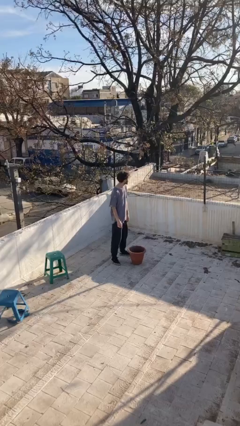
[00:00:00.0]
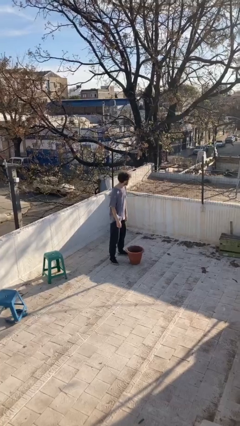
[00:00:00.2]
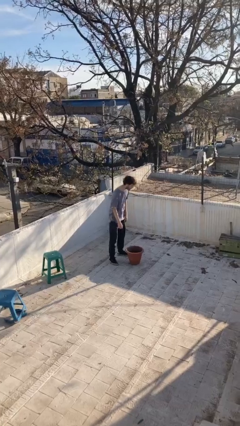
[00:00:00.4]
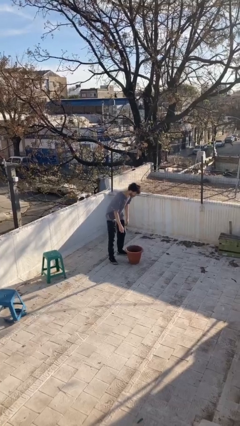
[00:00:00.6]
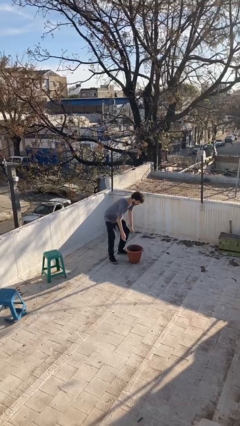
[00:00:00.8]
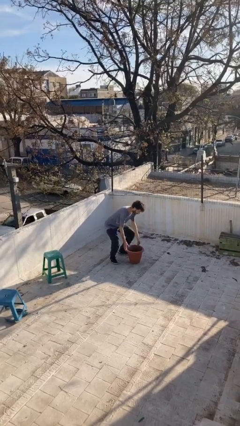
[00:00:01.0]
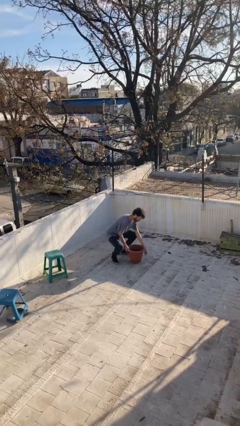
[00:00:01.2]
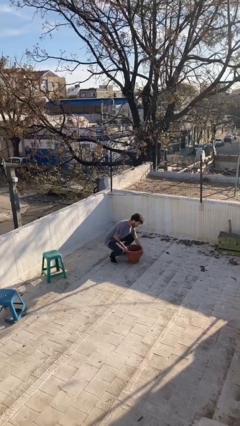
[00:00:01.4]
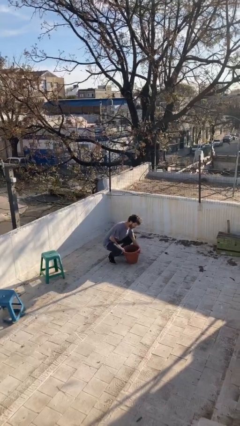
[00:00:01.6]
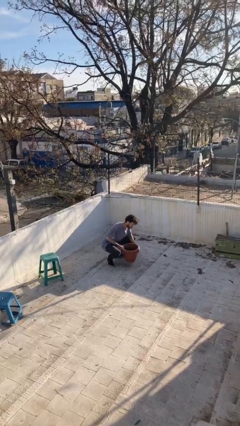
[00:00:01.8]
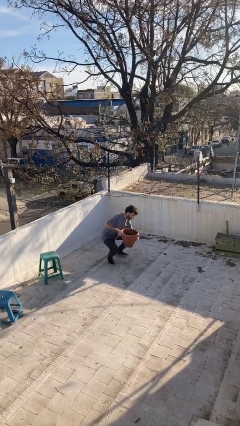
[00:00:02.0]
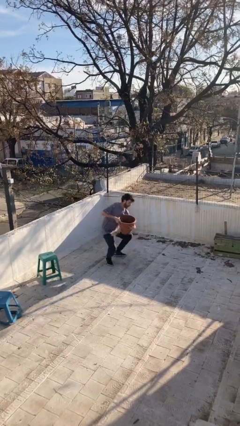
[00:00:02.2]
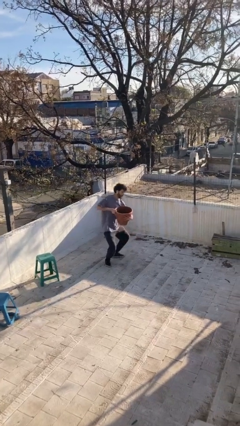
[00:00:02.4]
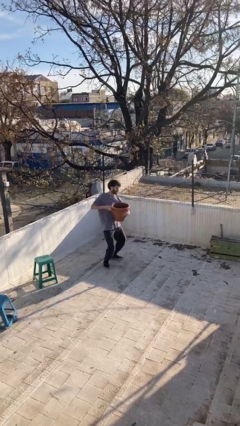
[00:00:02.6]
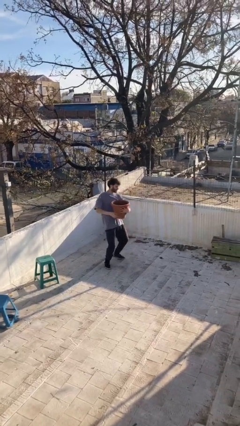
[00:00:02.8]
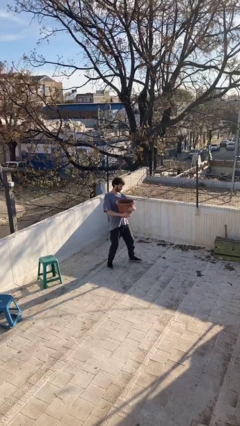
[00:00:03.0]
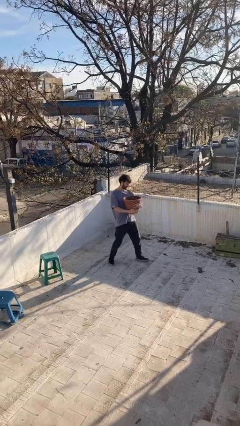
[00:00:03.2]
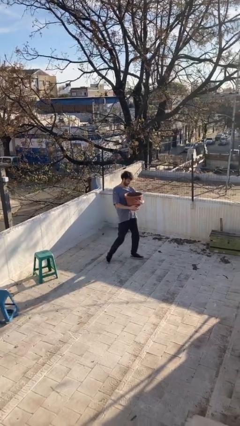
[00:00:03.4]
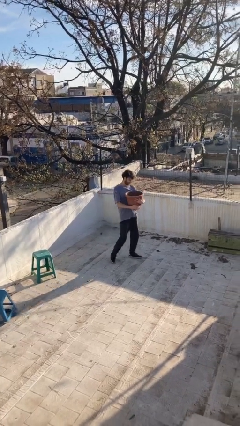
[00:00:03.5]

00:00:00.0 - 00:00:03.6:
person picks up object from floor

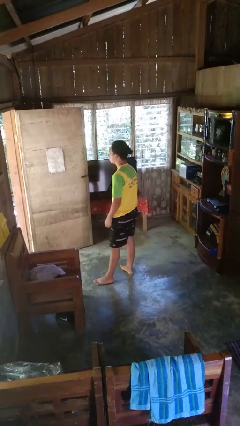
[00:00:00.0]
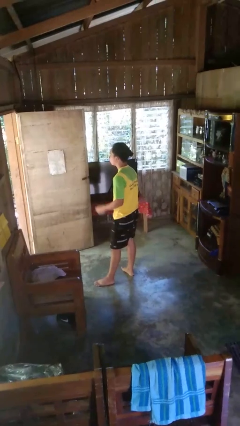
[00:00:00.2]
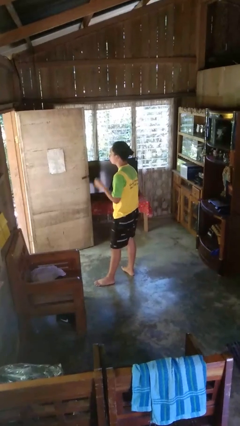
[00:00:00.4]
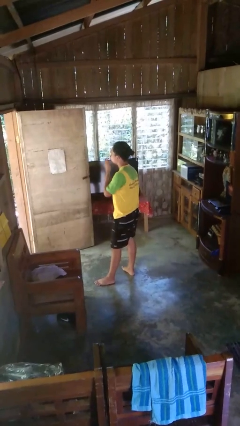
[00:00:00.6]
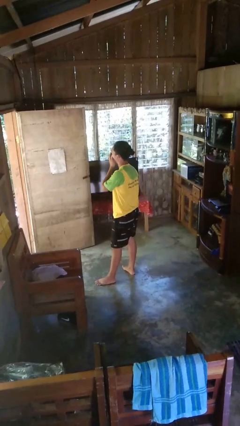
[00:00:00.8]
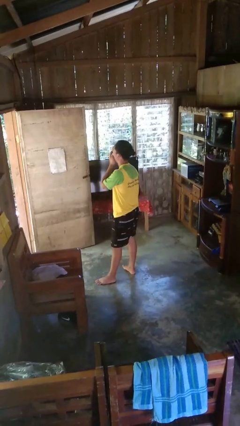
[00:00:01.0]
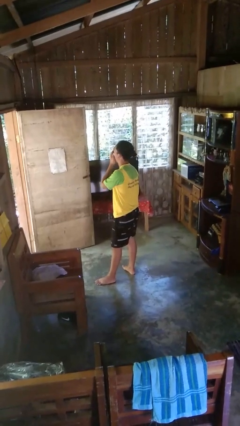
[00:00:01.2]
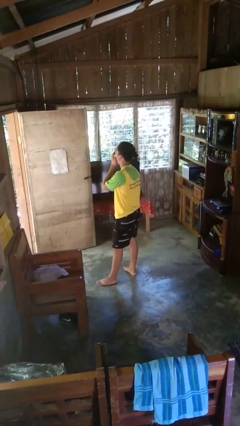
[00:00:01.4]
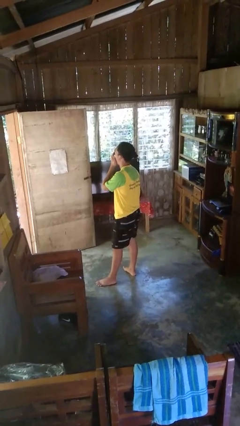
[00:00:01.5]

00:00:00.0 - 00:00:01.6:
person yawns

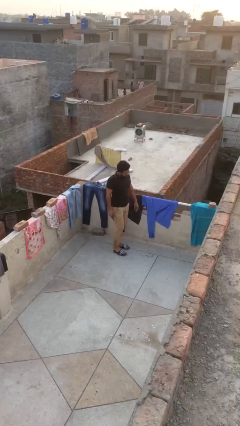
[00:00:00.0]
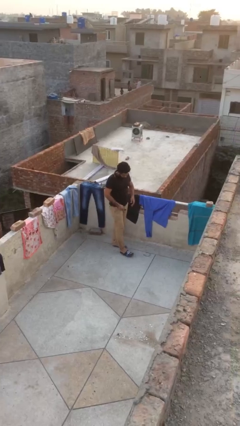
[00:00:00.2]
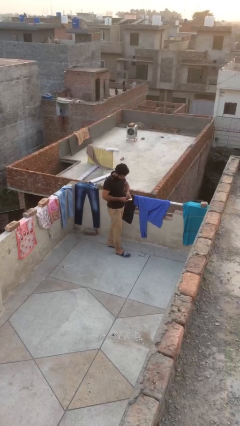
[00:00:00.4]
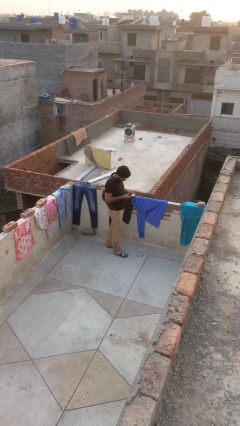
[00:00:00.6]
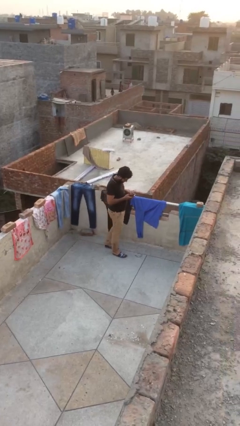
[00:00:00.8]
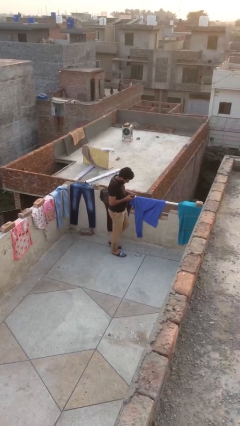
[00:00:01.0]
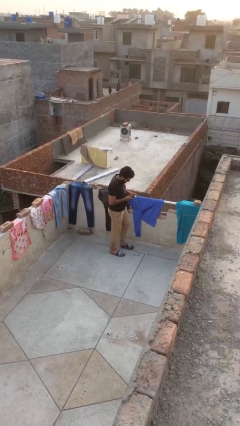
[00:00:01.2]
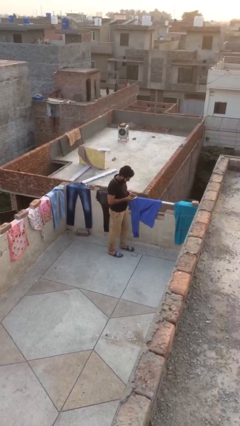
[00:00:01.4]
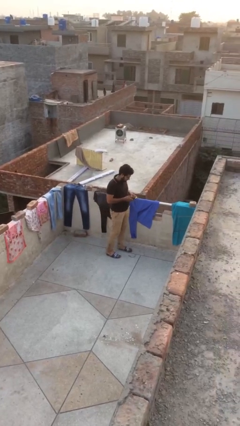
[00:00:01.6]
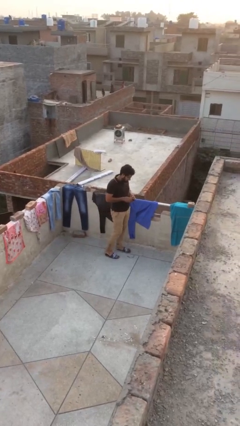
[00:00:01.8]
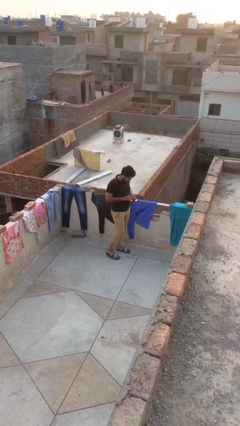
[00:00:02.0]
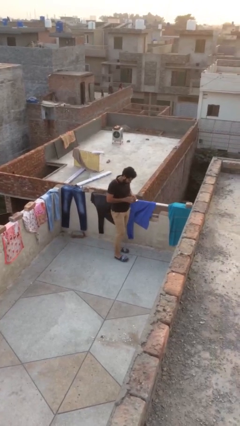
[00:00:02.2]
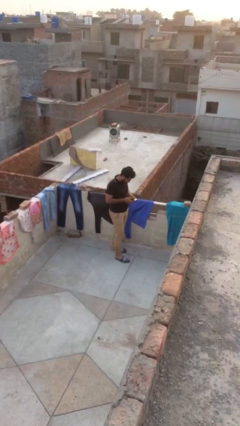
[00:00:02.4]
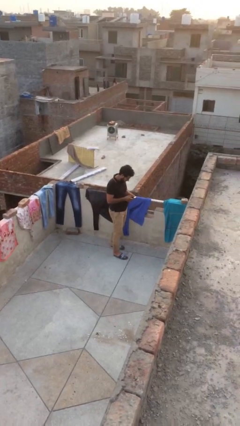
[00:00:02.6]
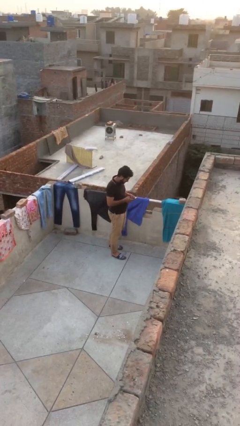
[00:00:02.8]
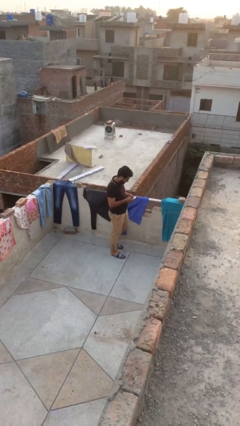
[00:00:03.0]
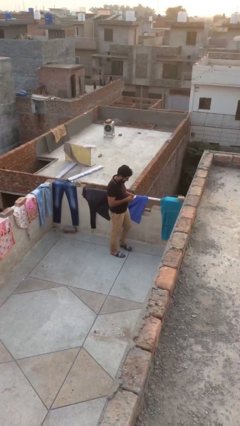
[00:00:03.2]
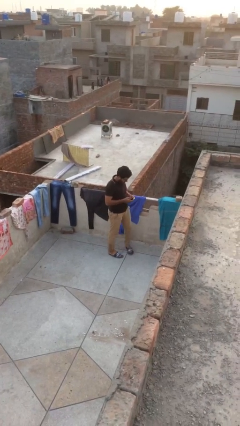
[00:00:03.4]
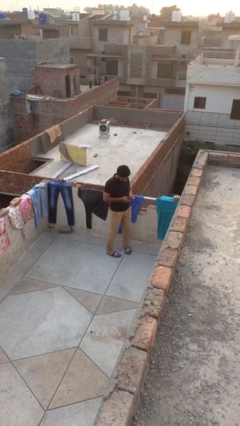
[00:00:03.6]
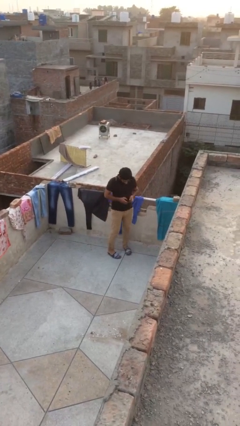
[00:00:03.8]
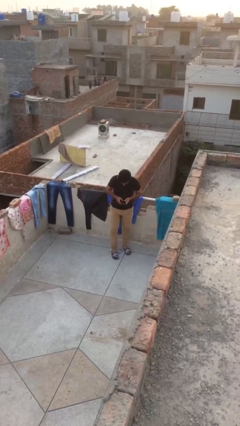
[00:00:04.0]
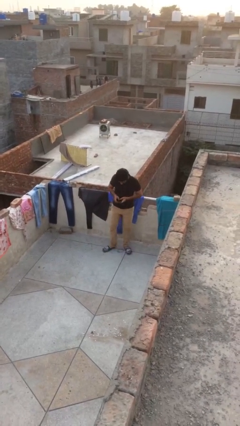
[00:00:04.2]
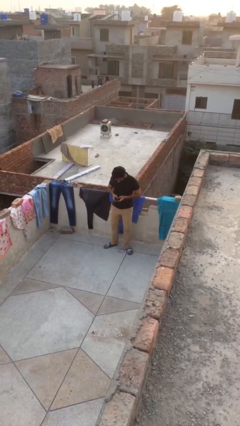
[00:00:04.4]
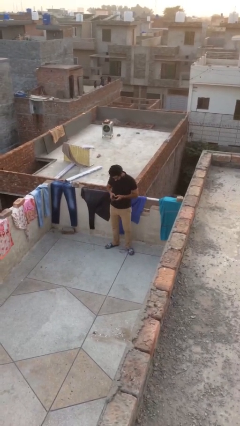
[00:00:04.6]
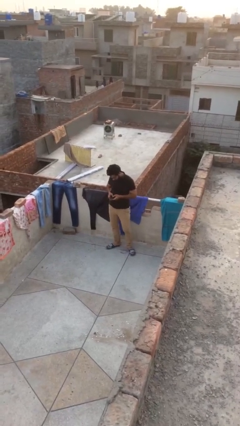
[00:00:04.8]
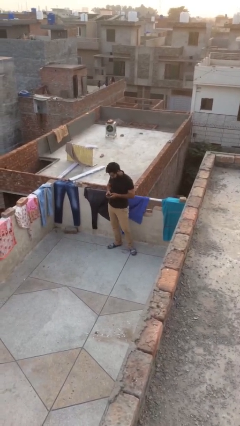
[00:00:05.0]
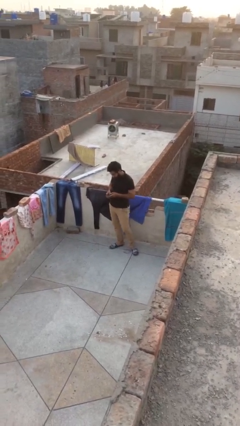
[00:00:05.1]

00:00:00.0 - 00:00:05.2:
person texts on phone

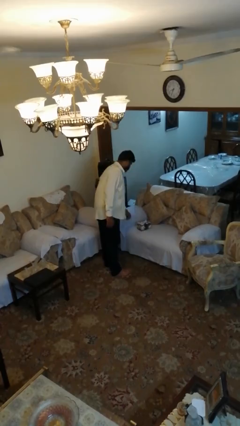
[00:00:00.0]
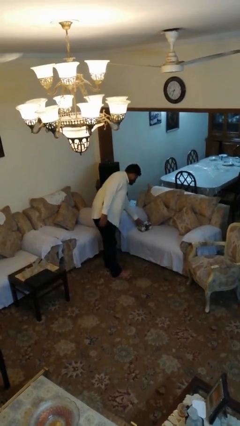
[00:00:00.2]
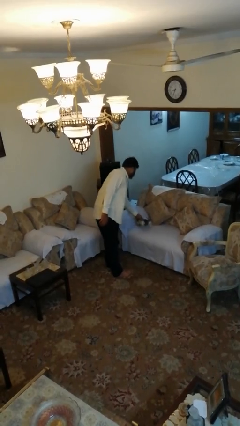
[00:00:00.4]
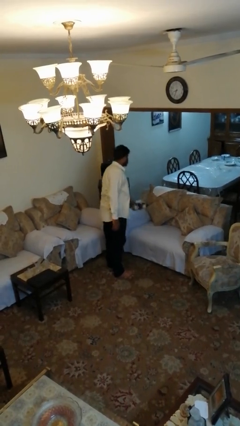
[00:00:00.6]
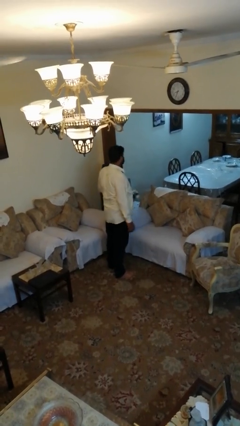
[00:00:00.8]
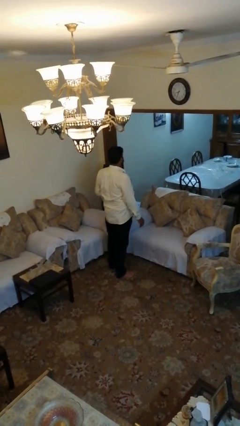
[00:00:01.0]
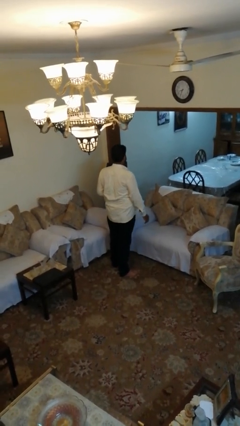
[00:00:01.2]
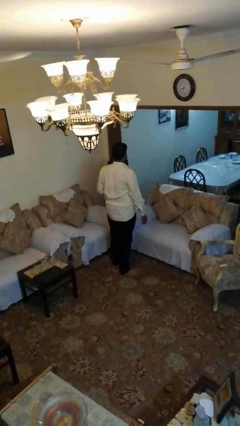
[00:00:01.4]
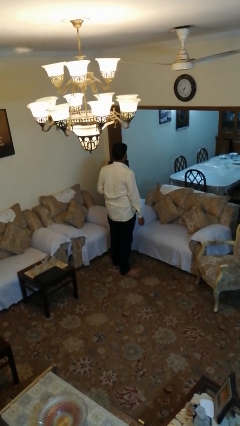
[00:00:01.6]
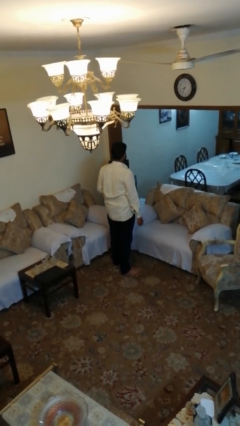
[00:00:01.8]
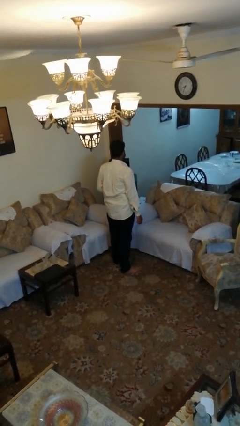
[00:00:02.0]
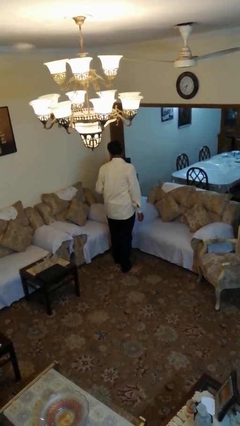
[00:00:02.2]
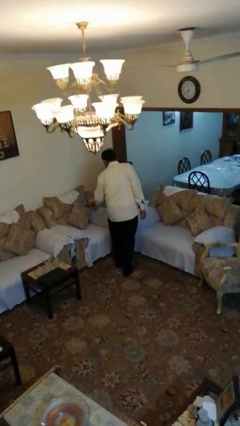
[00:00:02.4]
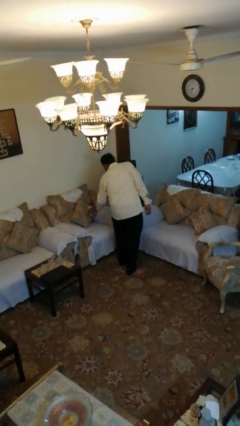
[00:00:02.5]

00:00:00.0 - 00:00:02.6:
person picks up object from couch

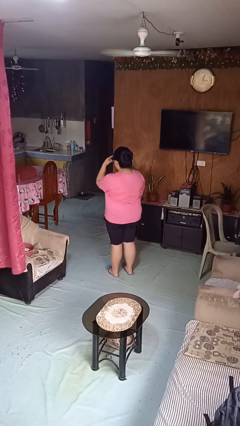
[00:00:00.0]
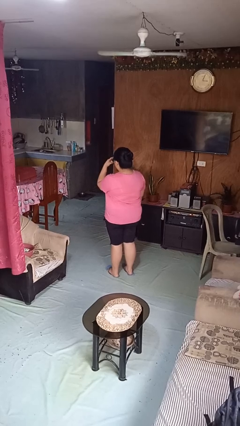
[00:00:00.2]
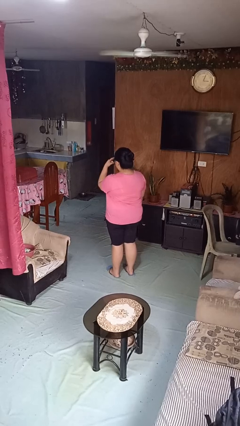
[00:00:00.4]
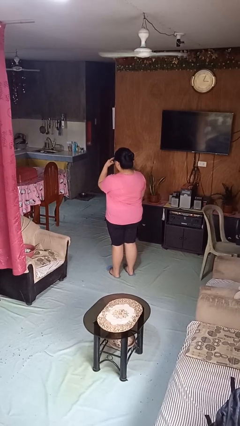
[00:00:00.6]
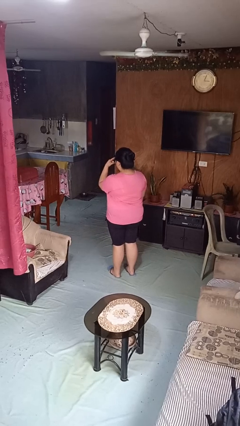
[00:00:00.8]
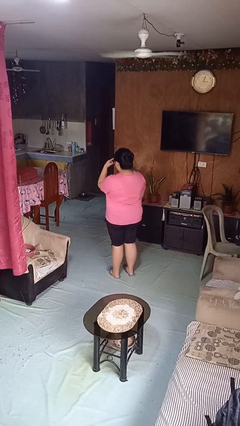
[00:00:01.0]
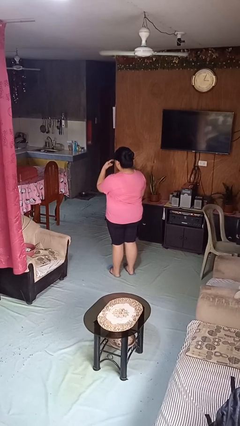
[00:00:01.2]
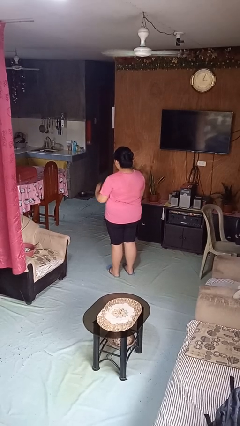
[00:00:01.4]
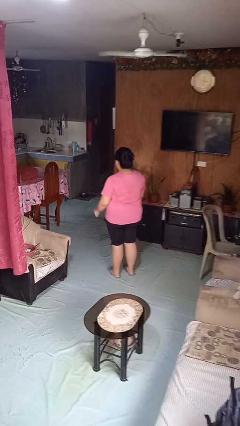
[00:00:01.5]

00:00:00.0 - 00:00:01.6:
person gestures watch closely

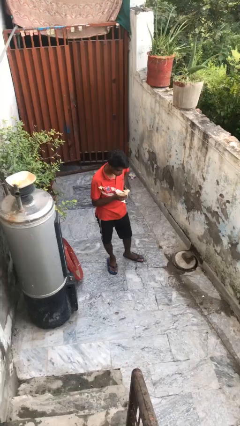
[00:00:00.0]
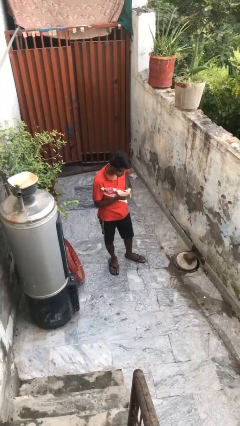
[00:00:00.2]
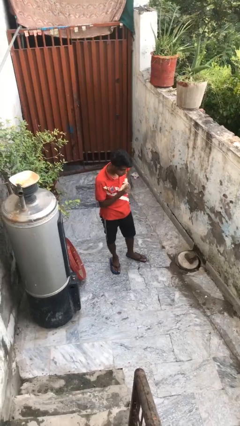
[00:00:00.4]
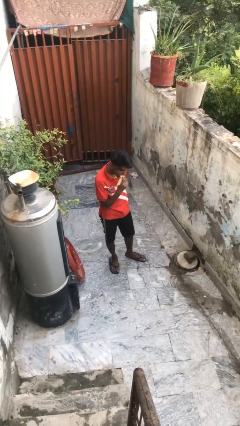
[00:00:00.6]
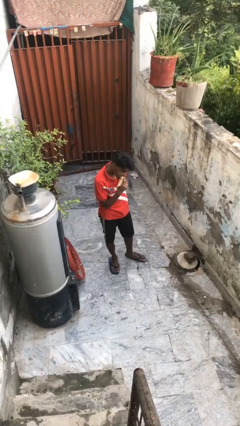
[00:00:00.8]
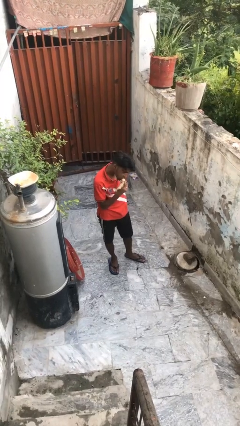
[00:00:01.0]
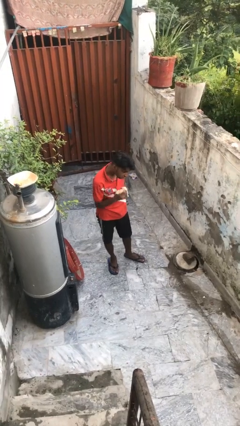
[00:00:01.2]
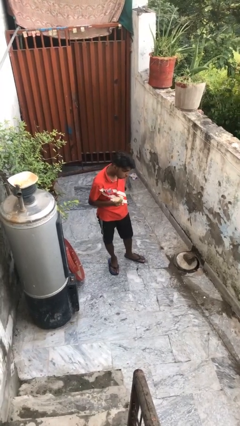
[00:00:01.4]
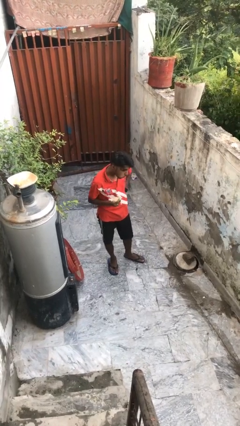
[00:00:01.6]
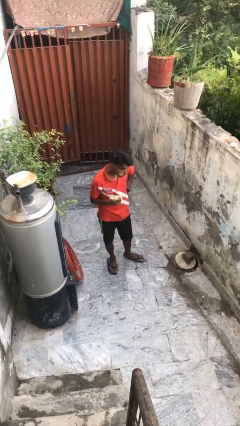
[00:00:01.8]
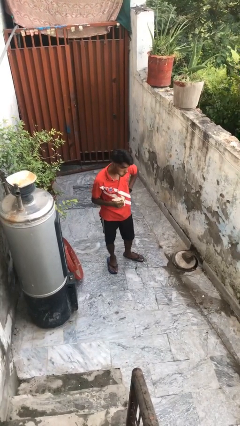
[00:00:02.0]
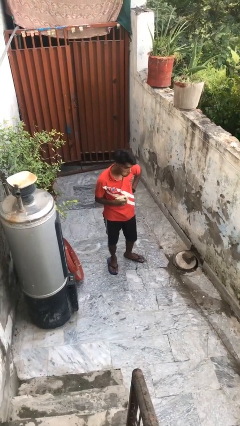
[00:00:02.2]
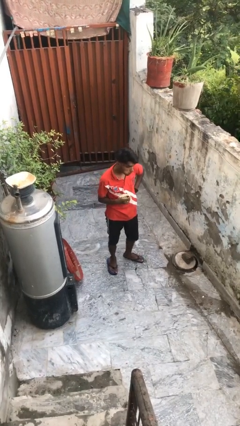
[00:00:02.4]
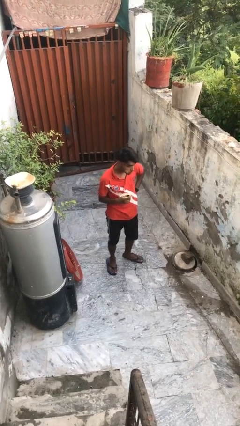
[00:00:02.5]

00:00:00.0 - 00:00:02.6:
person eats banana
